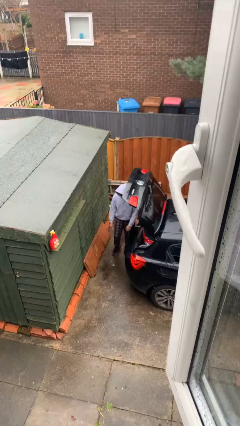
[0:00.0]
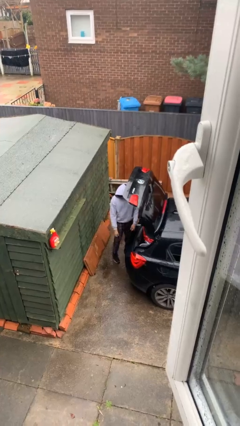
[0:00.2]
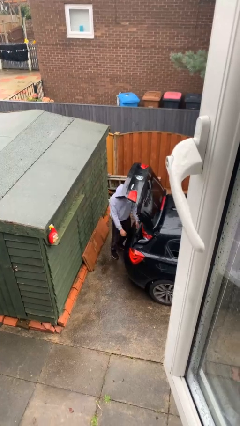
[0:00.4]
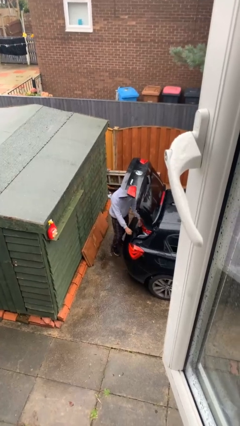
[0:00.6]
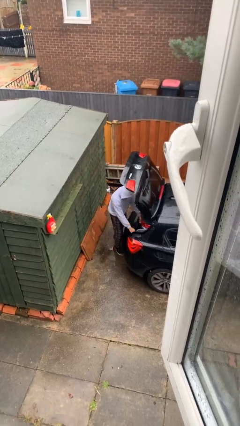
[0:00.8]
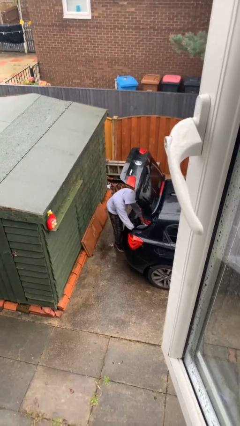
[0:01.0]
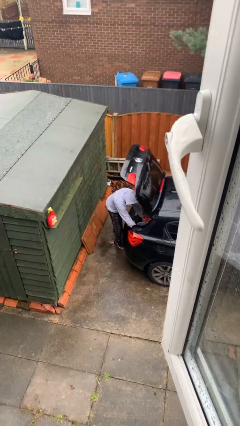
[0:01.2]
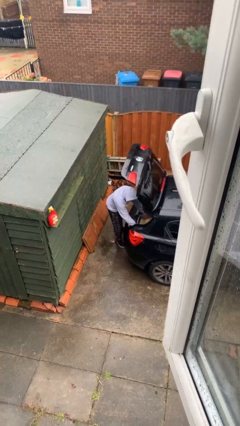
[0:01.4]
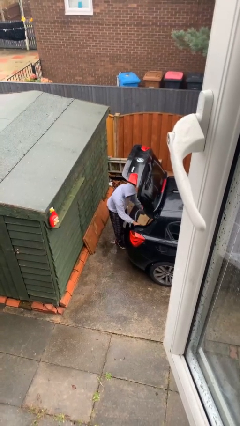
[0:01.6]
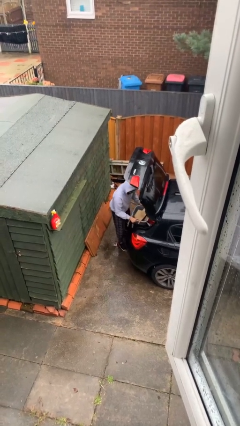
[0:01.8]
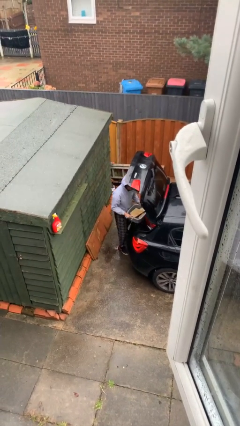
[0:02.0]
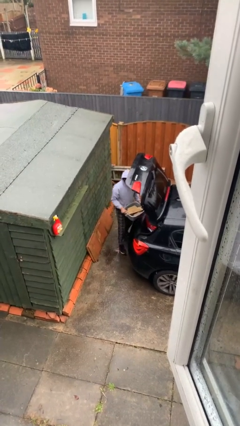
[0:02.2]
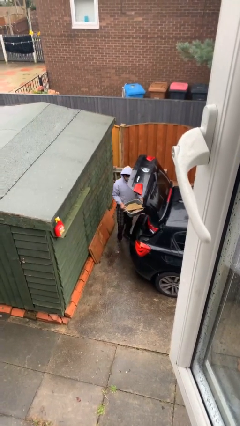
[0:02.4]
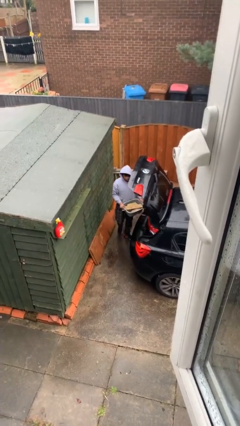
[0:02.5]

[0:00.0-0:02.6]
person unloads car

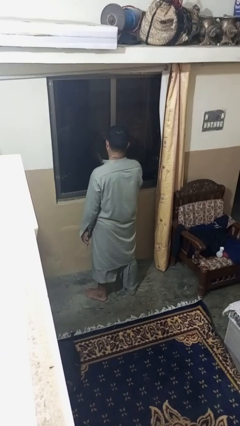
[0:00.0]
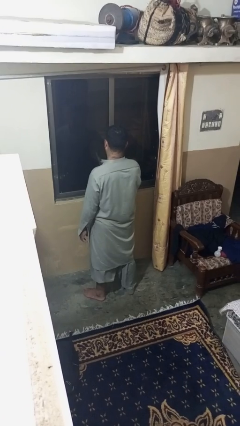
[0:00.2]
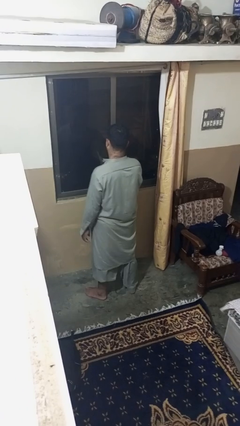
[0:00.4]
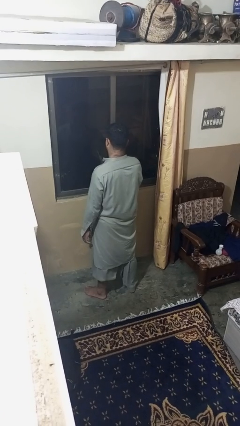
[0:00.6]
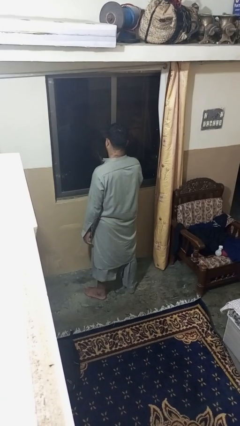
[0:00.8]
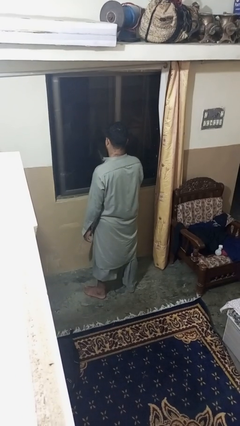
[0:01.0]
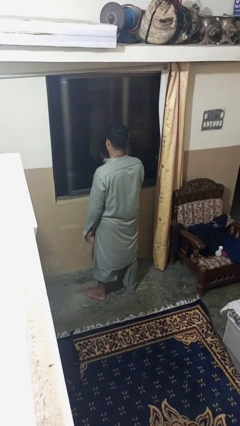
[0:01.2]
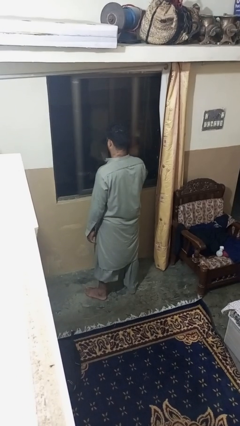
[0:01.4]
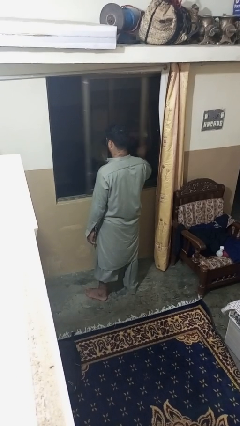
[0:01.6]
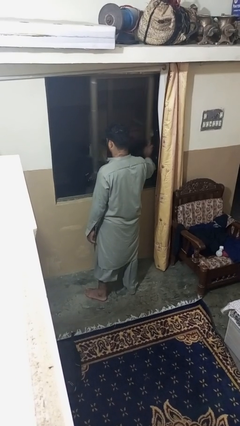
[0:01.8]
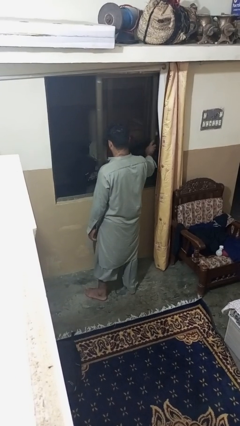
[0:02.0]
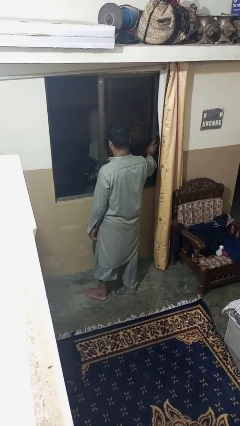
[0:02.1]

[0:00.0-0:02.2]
person opens home window

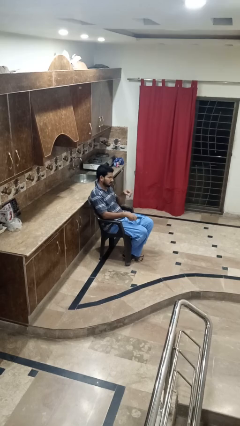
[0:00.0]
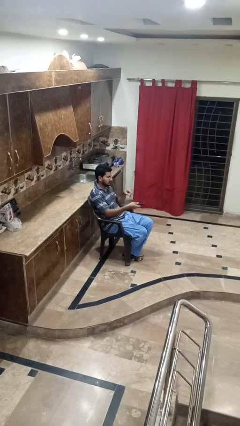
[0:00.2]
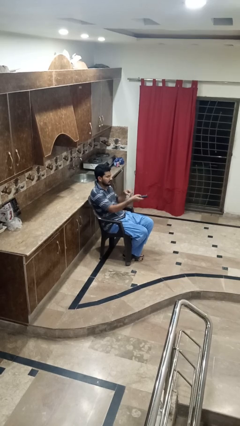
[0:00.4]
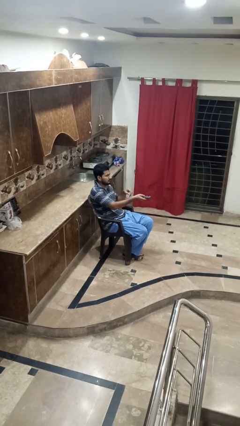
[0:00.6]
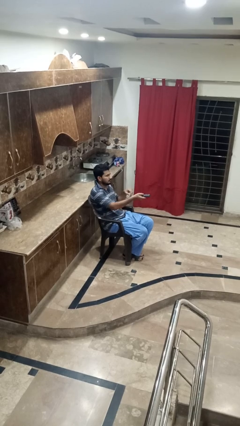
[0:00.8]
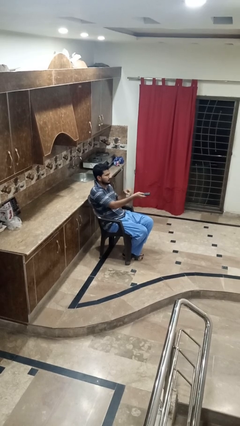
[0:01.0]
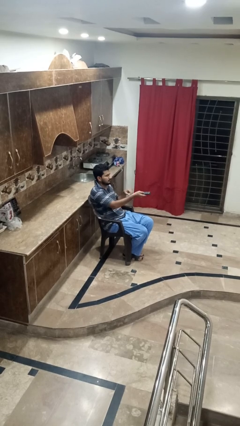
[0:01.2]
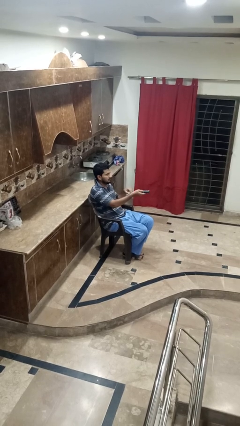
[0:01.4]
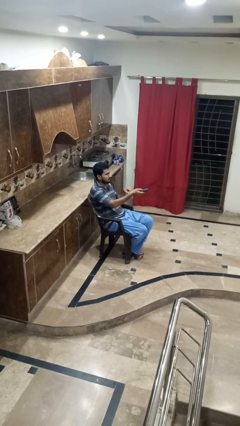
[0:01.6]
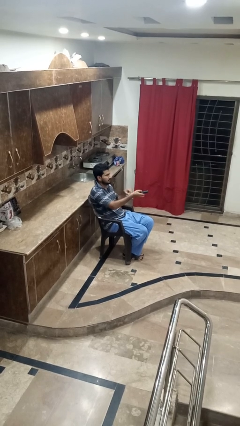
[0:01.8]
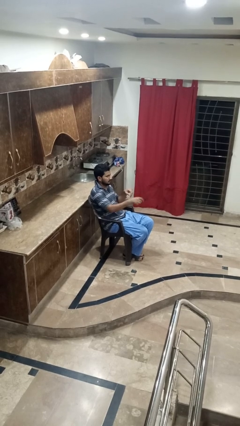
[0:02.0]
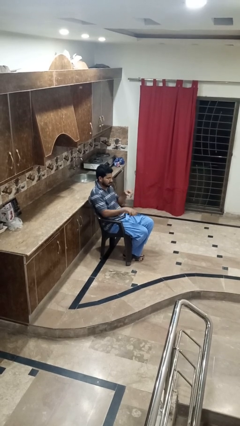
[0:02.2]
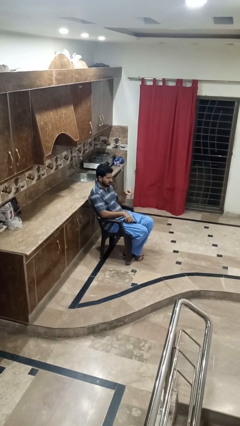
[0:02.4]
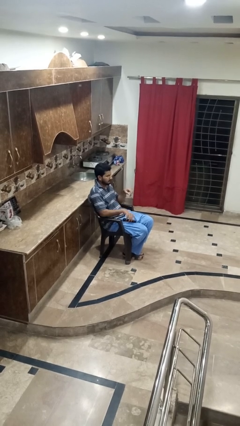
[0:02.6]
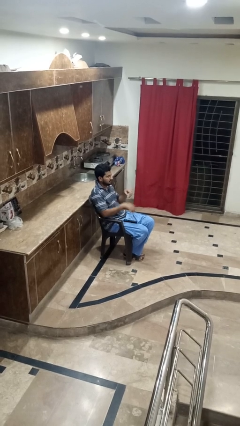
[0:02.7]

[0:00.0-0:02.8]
person uses television remote

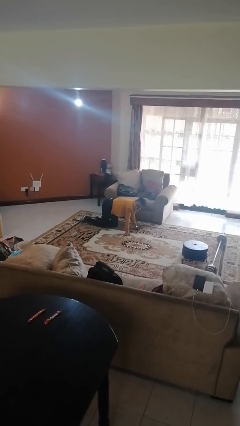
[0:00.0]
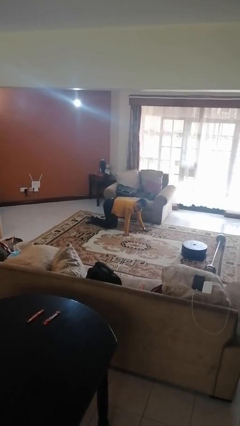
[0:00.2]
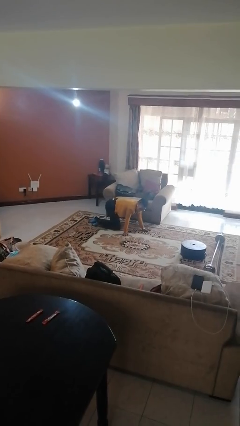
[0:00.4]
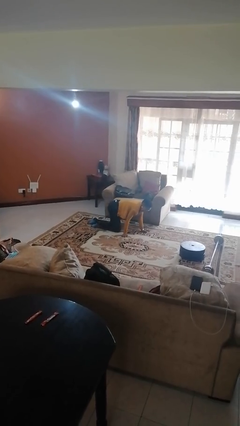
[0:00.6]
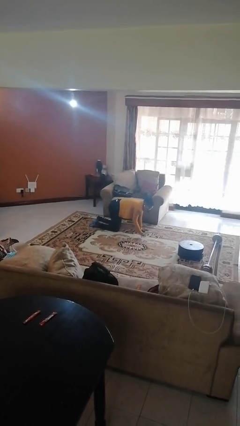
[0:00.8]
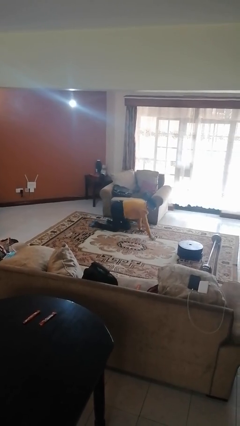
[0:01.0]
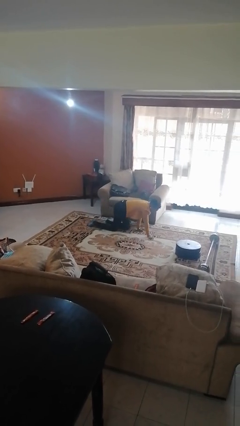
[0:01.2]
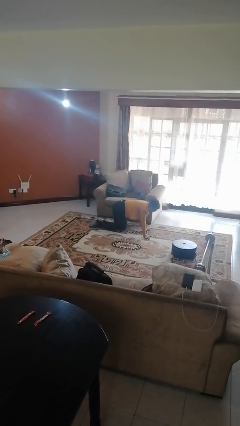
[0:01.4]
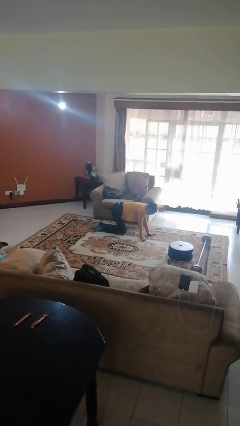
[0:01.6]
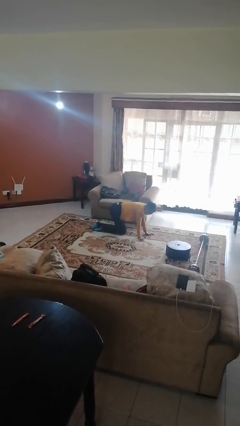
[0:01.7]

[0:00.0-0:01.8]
person crawls

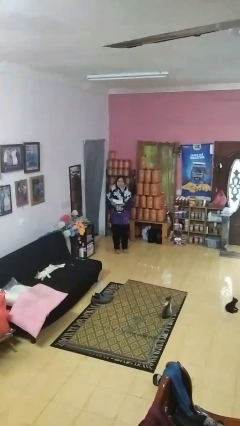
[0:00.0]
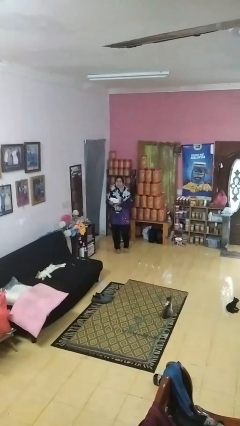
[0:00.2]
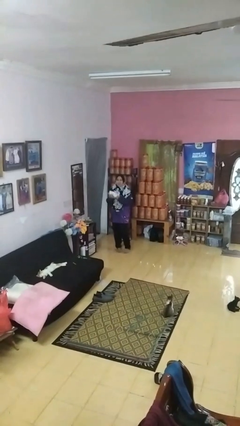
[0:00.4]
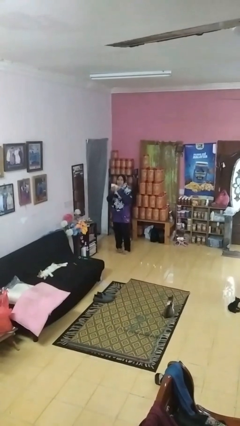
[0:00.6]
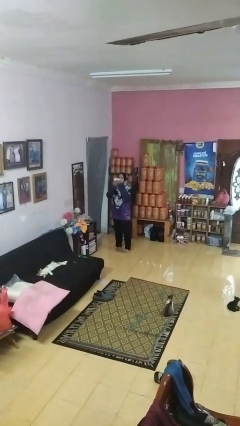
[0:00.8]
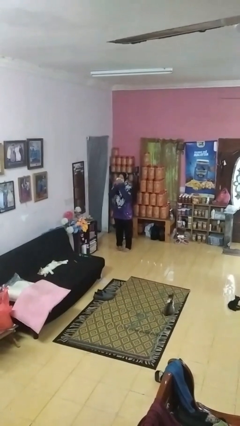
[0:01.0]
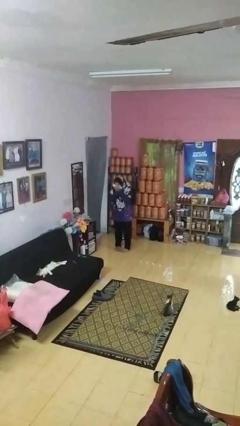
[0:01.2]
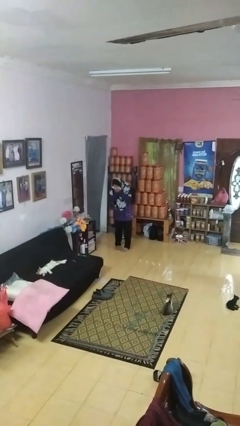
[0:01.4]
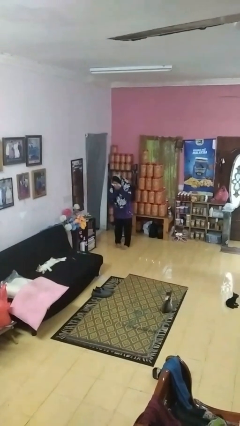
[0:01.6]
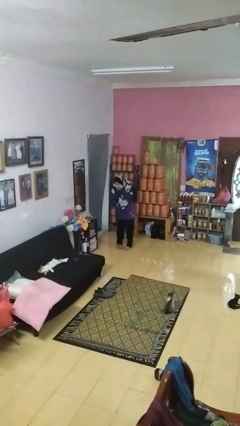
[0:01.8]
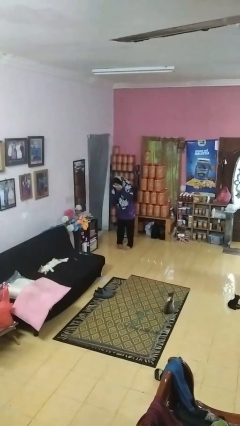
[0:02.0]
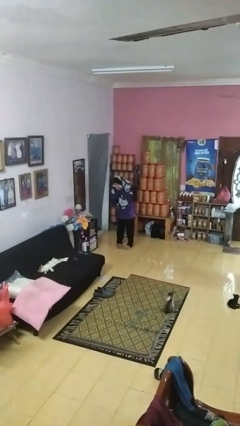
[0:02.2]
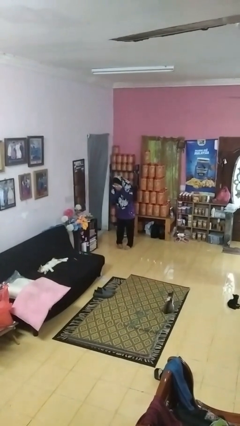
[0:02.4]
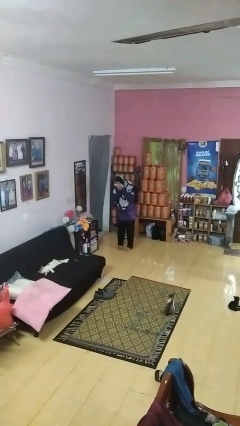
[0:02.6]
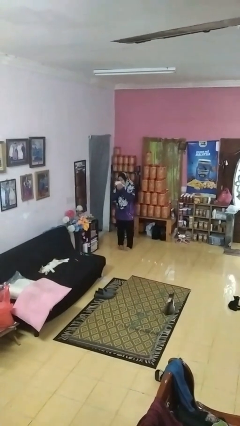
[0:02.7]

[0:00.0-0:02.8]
person blows nose

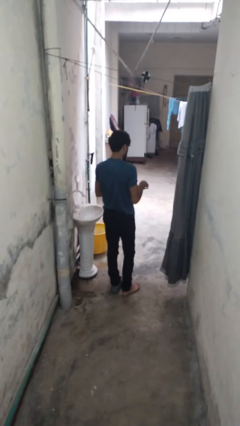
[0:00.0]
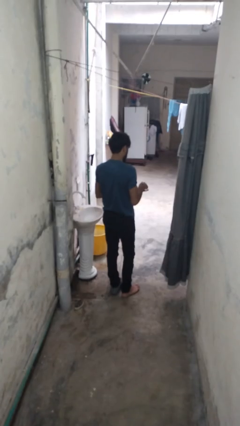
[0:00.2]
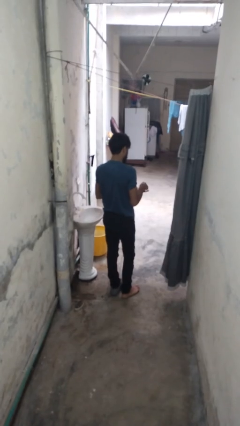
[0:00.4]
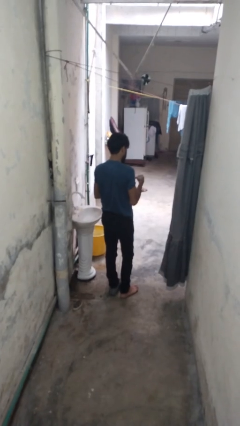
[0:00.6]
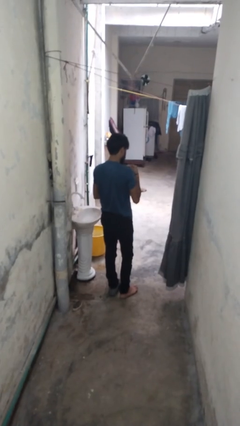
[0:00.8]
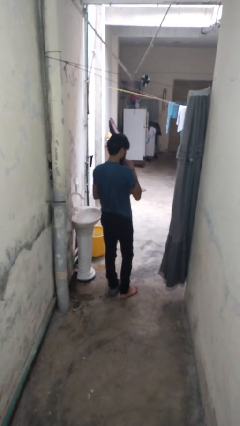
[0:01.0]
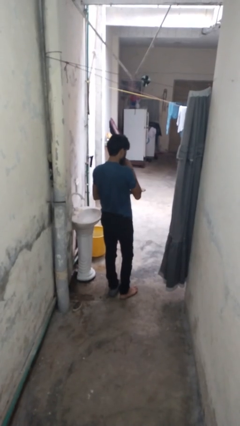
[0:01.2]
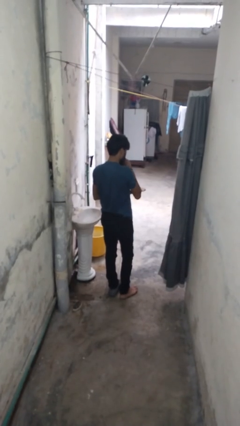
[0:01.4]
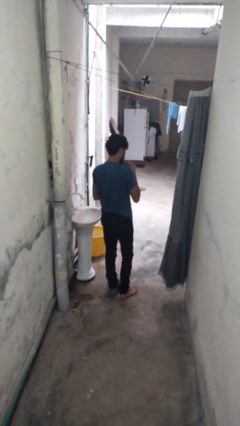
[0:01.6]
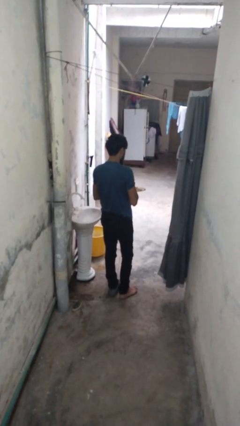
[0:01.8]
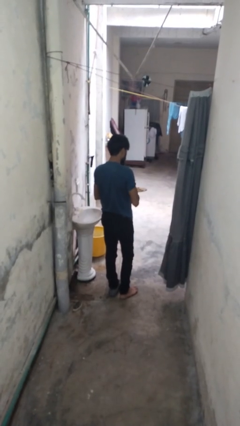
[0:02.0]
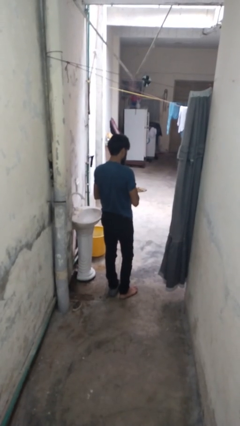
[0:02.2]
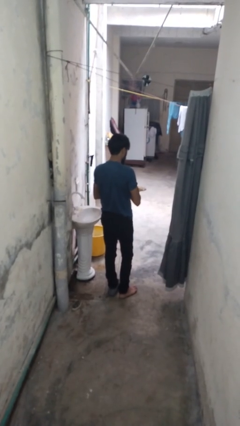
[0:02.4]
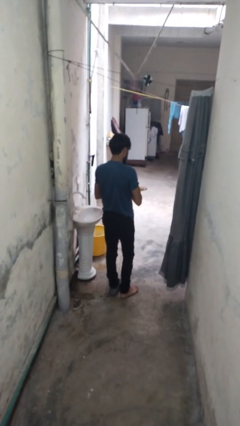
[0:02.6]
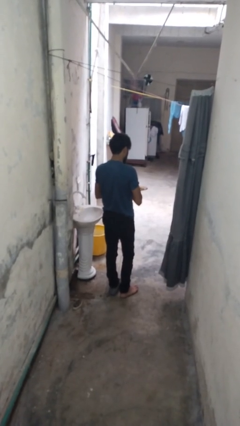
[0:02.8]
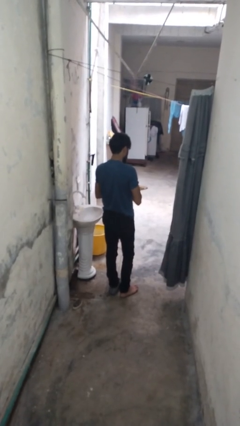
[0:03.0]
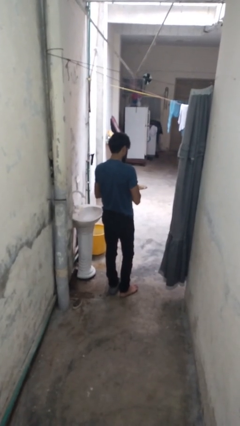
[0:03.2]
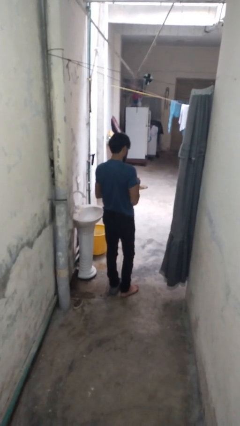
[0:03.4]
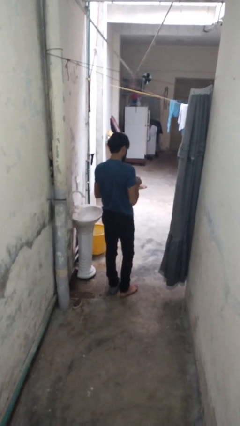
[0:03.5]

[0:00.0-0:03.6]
person eats with hands

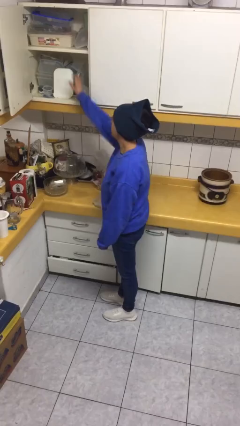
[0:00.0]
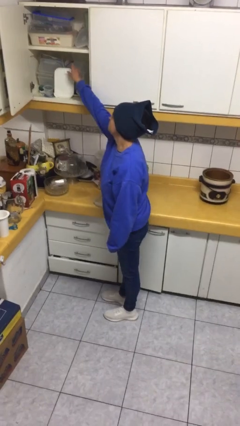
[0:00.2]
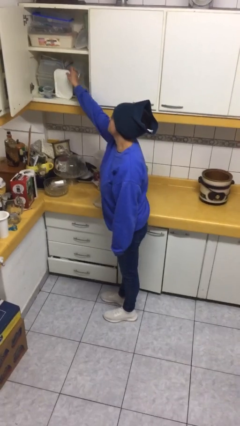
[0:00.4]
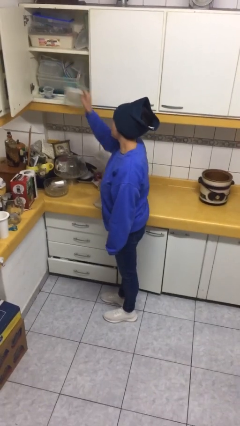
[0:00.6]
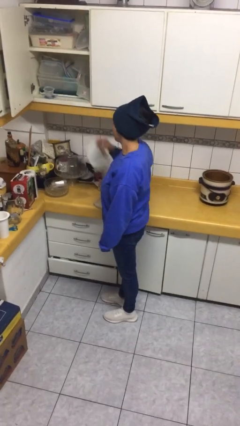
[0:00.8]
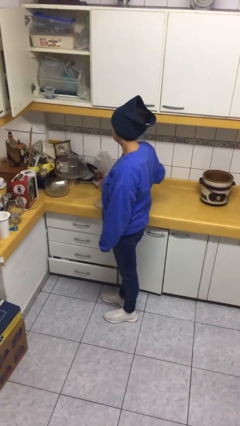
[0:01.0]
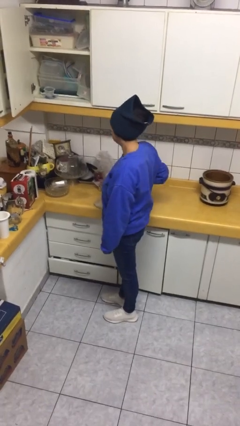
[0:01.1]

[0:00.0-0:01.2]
person takes object from cabinet
